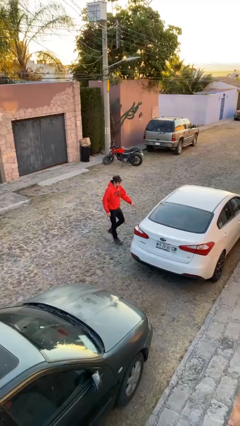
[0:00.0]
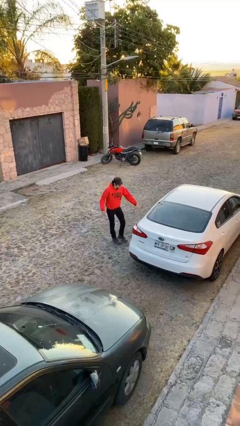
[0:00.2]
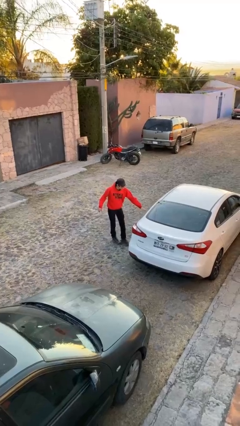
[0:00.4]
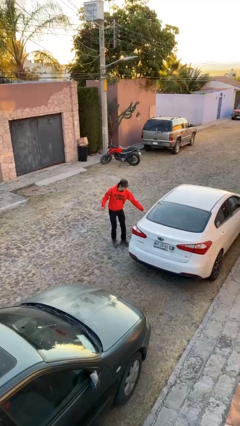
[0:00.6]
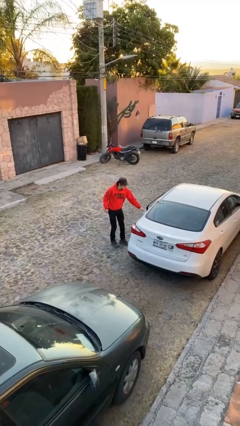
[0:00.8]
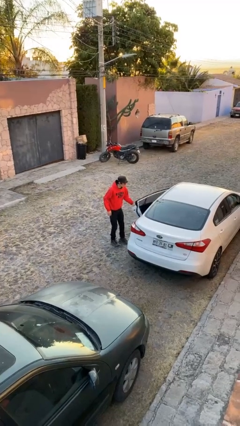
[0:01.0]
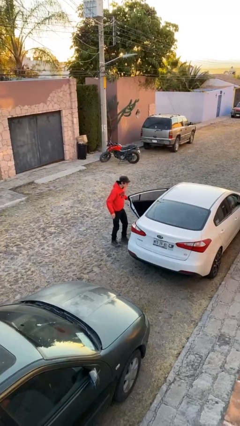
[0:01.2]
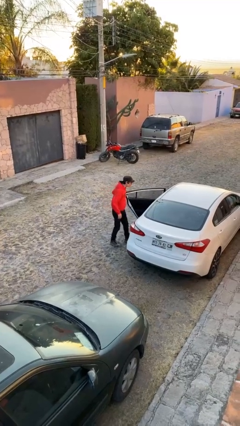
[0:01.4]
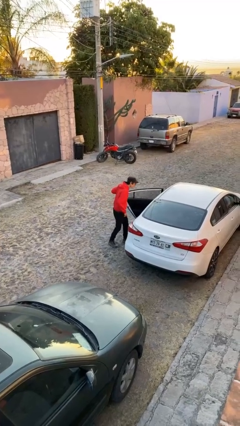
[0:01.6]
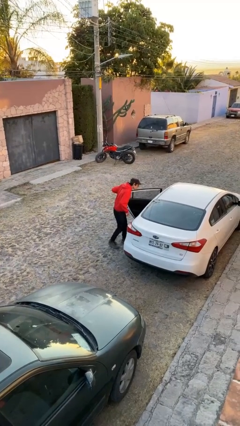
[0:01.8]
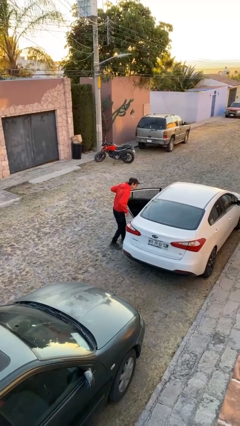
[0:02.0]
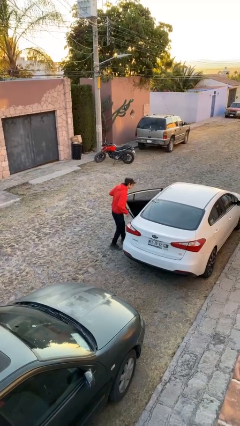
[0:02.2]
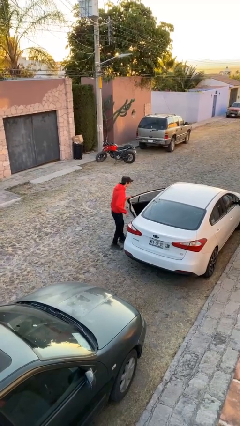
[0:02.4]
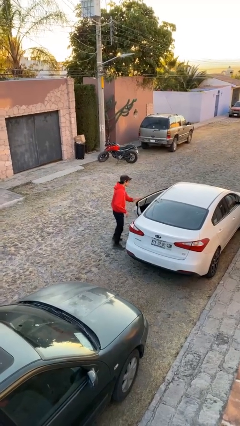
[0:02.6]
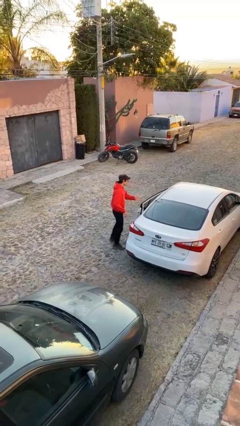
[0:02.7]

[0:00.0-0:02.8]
person opens facility door

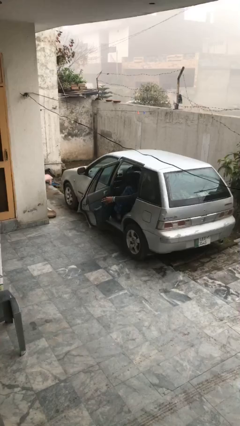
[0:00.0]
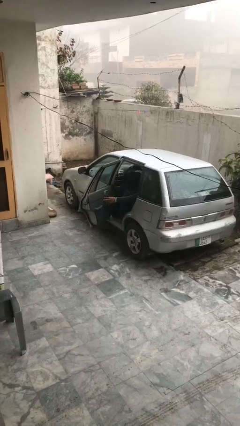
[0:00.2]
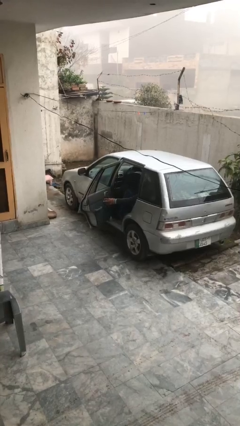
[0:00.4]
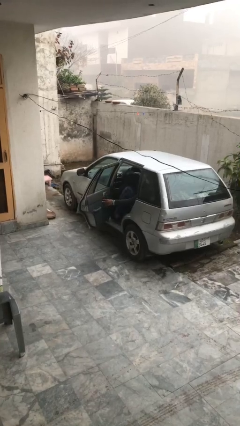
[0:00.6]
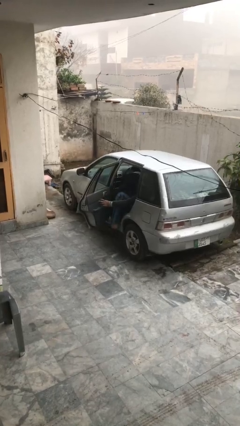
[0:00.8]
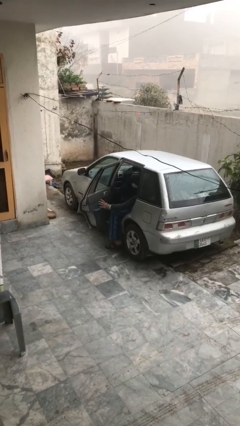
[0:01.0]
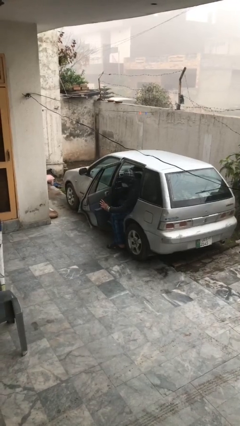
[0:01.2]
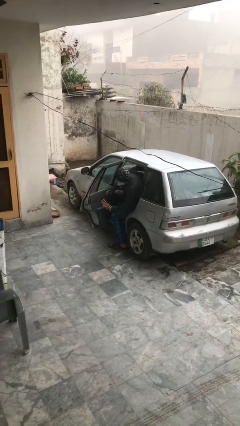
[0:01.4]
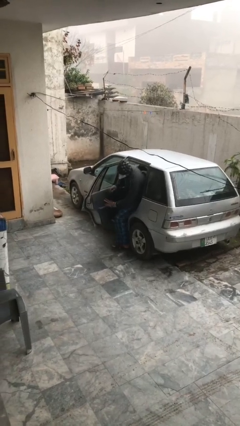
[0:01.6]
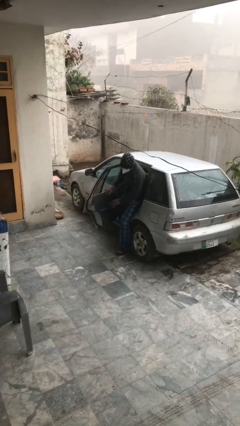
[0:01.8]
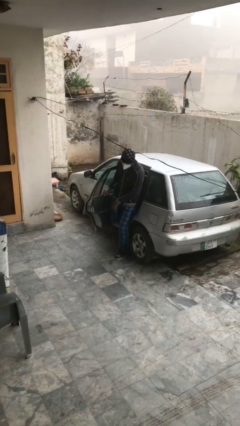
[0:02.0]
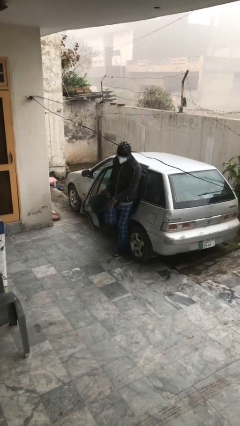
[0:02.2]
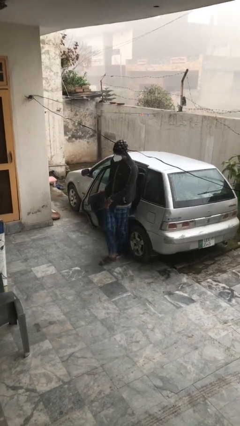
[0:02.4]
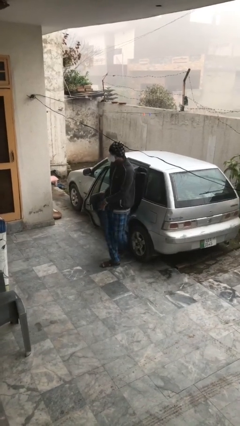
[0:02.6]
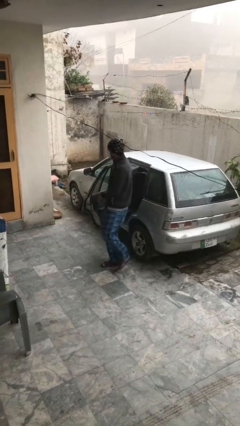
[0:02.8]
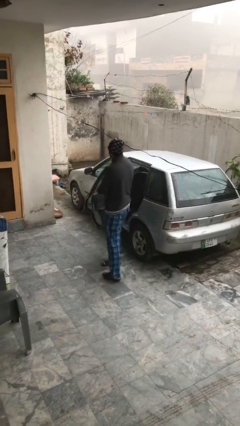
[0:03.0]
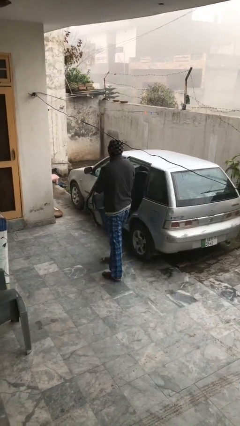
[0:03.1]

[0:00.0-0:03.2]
person exits car

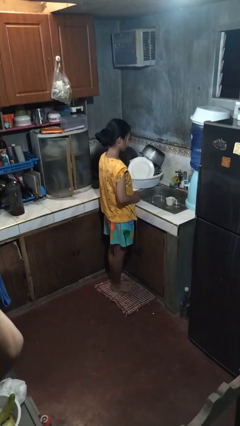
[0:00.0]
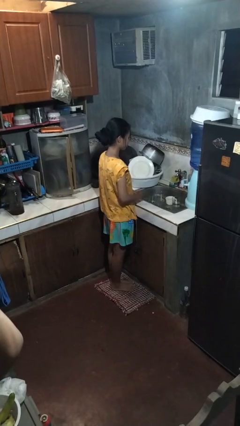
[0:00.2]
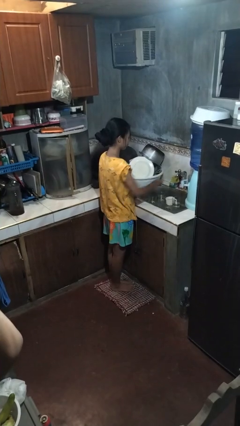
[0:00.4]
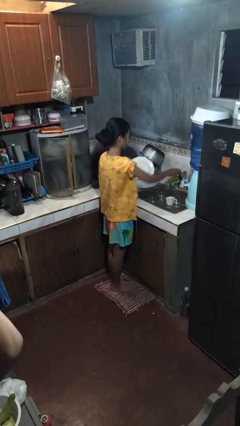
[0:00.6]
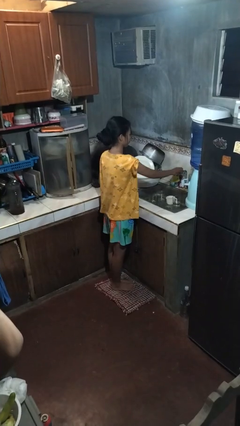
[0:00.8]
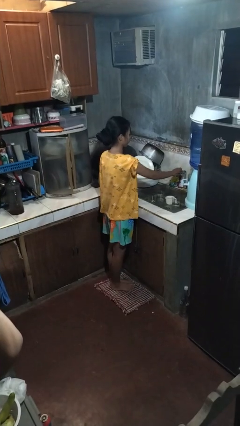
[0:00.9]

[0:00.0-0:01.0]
person turns on faucet

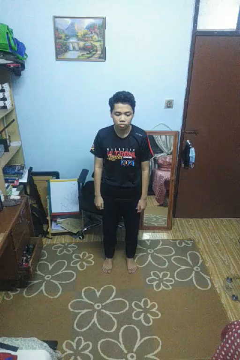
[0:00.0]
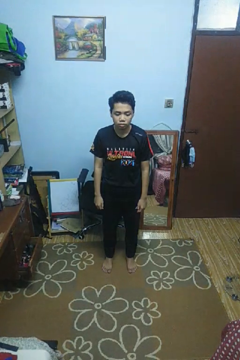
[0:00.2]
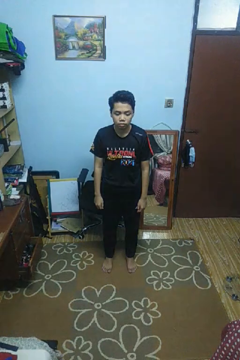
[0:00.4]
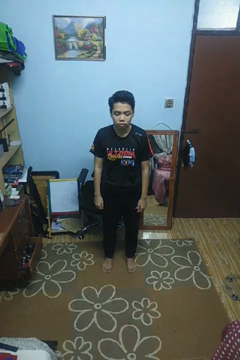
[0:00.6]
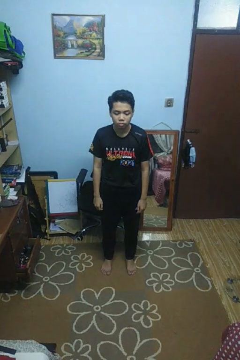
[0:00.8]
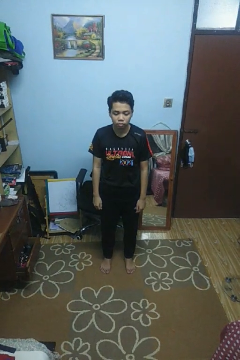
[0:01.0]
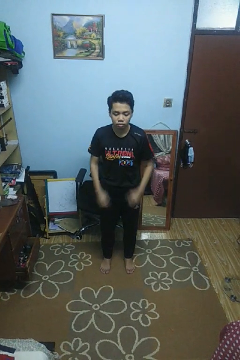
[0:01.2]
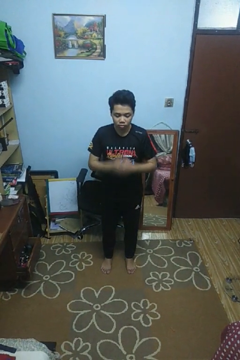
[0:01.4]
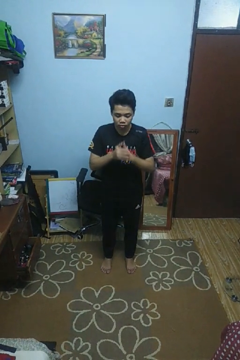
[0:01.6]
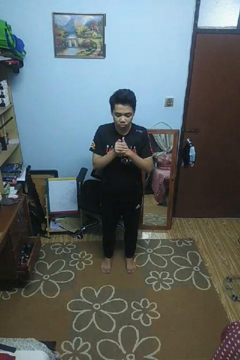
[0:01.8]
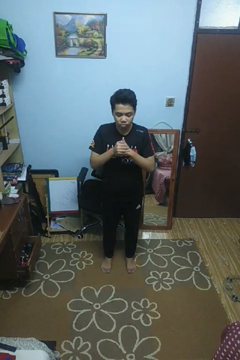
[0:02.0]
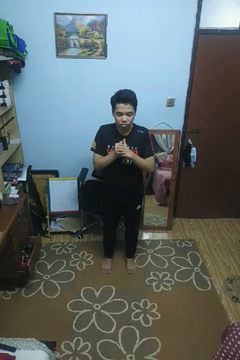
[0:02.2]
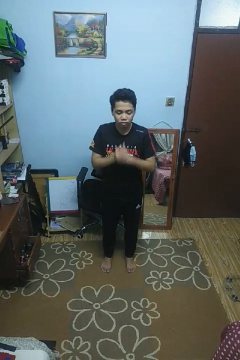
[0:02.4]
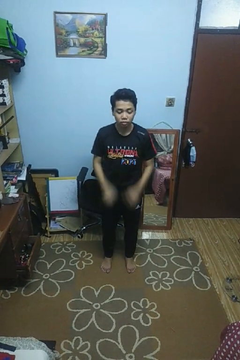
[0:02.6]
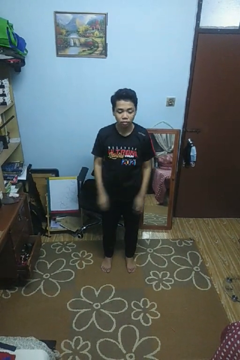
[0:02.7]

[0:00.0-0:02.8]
person cracks knuckles

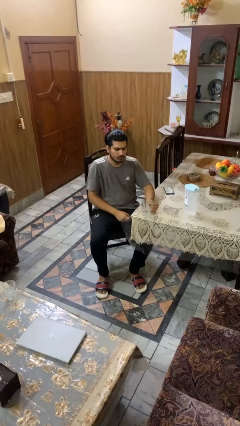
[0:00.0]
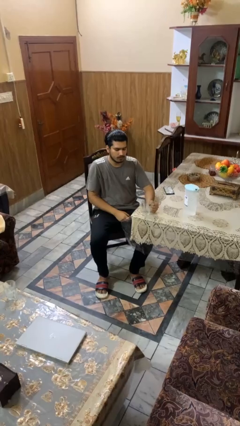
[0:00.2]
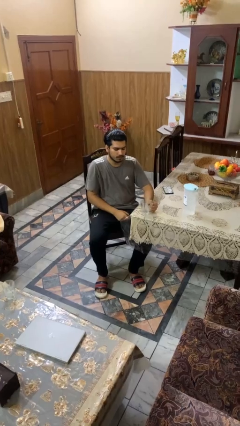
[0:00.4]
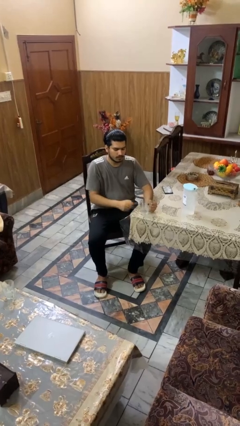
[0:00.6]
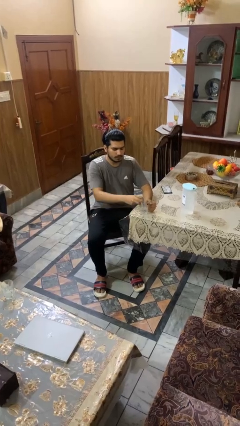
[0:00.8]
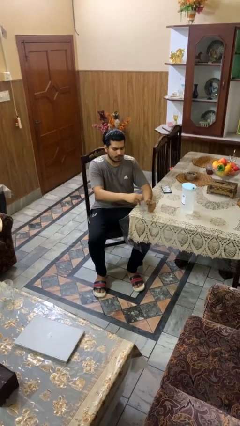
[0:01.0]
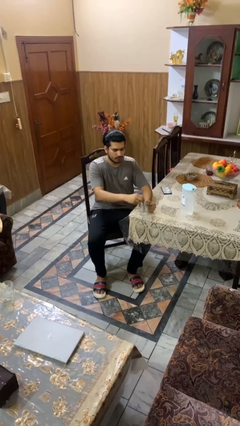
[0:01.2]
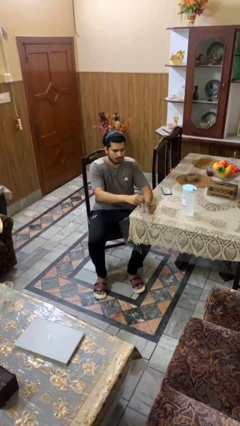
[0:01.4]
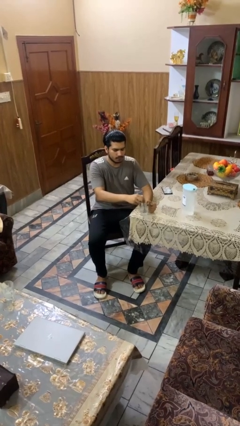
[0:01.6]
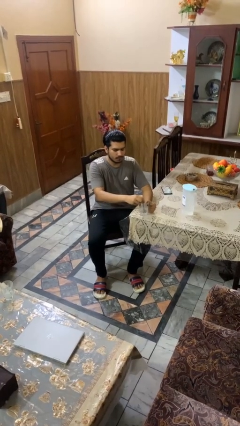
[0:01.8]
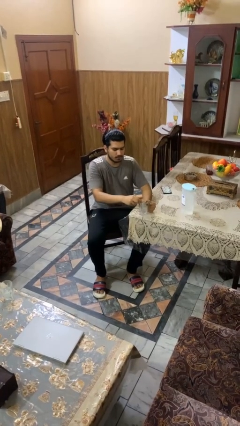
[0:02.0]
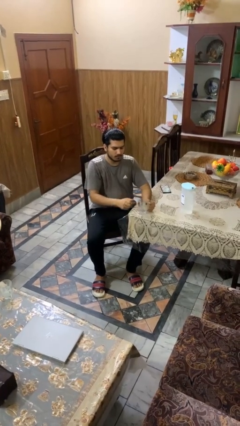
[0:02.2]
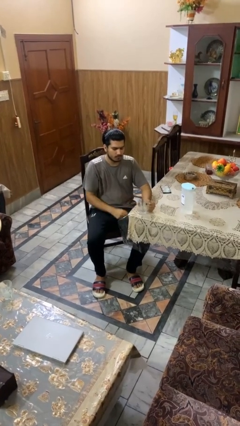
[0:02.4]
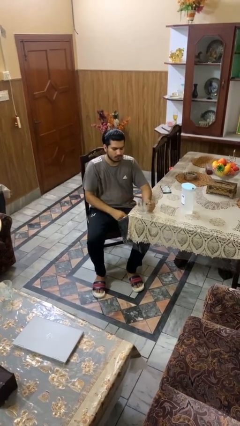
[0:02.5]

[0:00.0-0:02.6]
person stirs mug

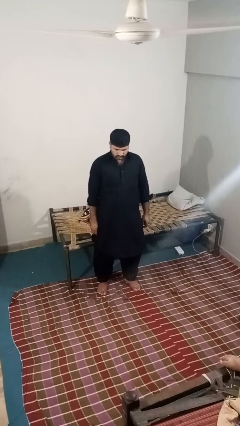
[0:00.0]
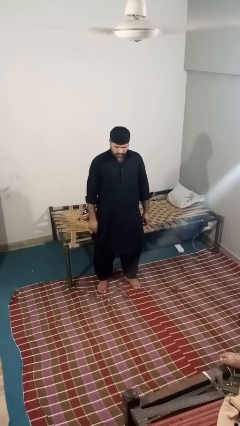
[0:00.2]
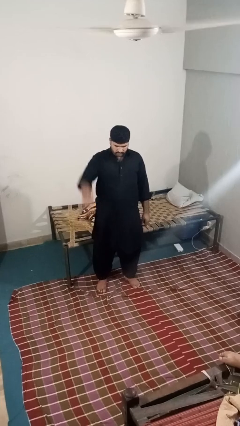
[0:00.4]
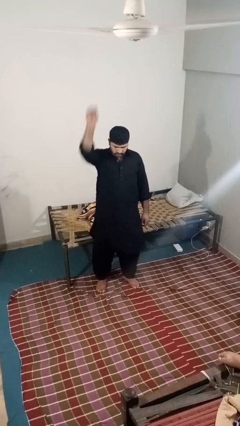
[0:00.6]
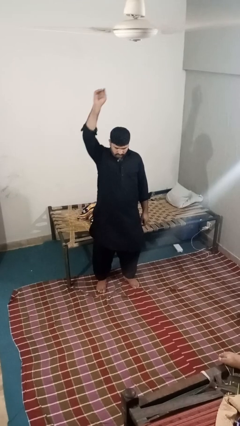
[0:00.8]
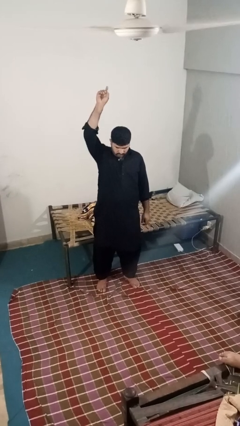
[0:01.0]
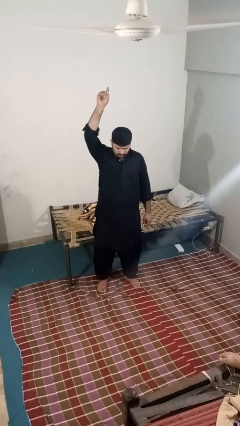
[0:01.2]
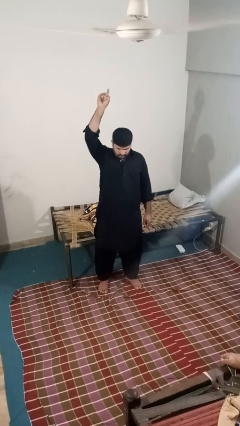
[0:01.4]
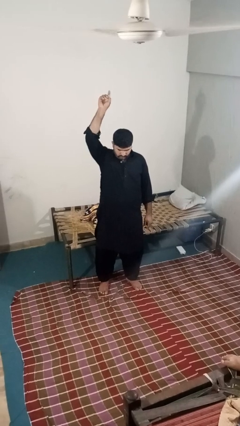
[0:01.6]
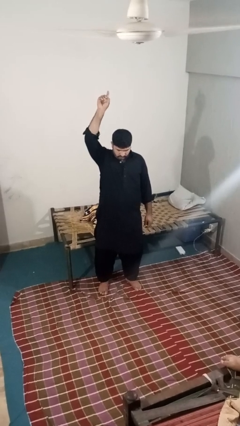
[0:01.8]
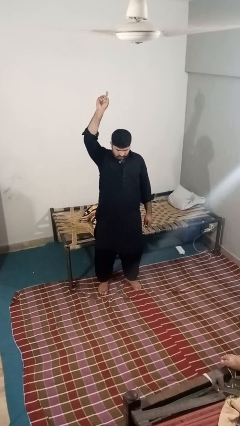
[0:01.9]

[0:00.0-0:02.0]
person gestures swipe up

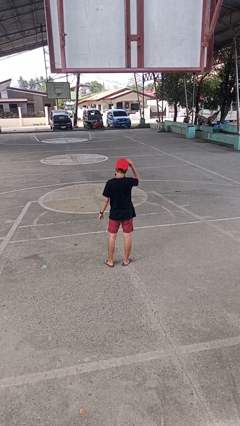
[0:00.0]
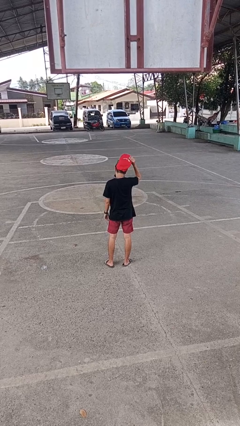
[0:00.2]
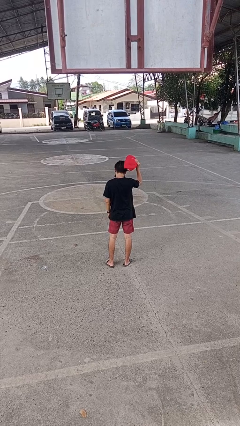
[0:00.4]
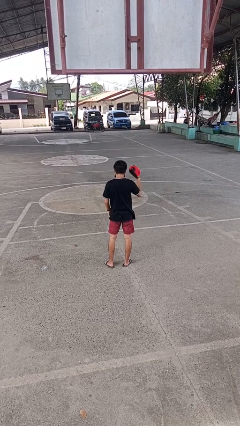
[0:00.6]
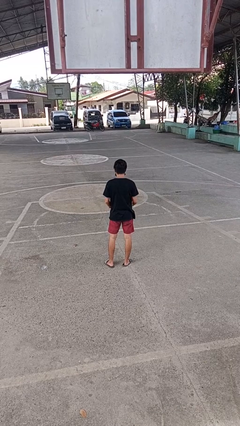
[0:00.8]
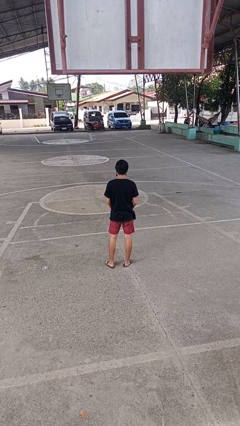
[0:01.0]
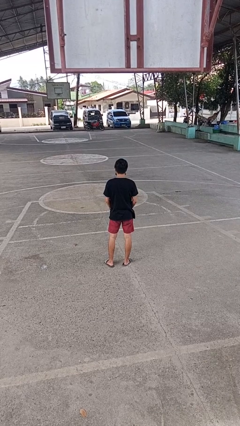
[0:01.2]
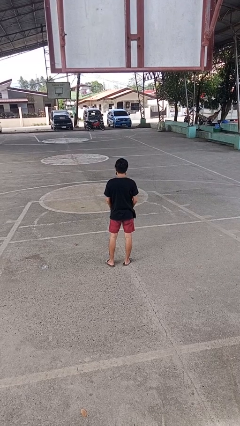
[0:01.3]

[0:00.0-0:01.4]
person takes off hat

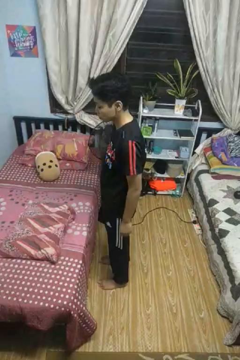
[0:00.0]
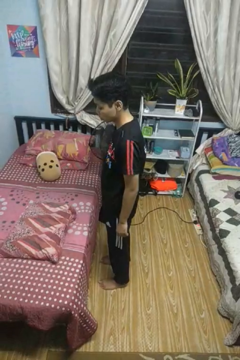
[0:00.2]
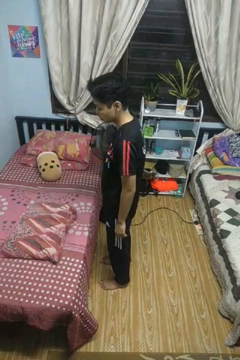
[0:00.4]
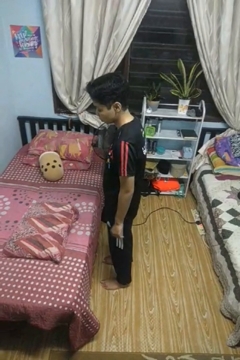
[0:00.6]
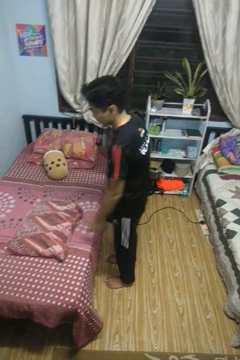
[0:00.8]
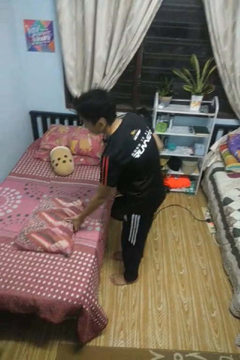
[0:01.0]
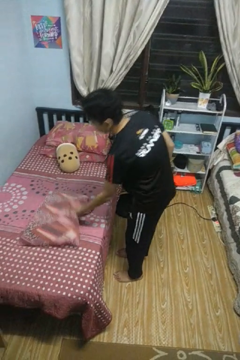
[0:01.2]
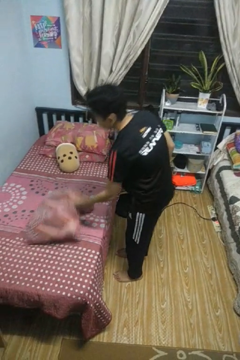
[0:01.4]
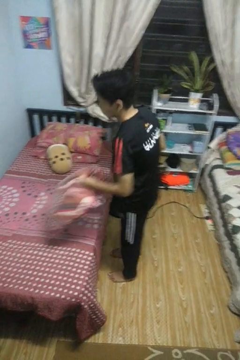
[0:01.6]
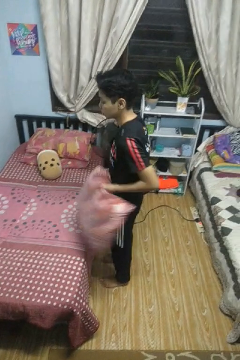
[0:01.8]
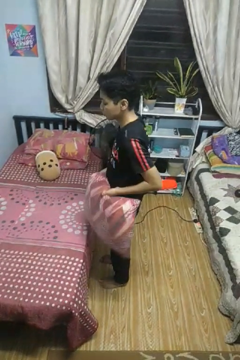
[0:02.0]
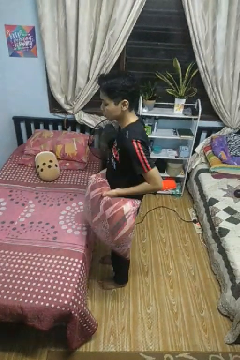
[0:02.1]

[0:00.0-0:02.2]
person picks up object from bed

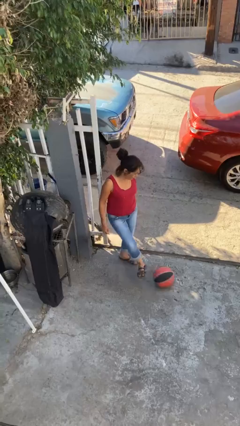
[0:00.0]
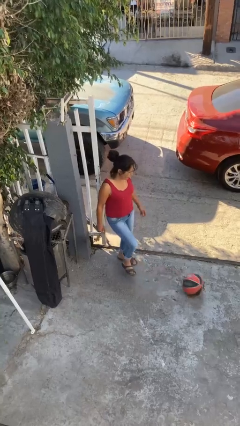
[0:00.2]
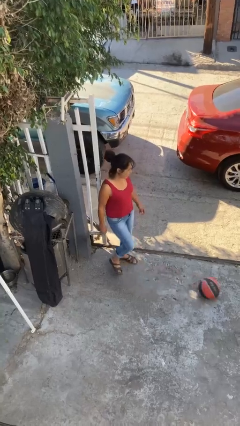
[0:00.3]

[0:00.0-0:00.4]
person kicks object to person
